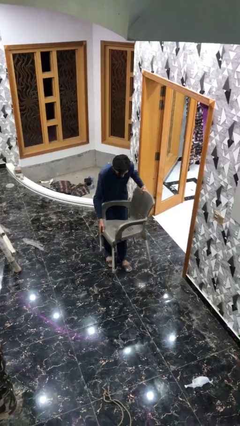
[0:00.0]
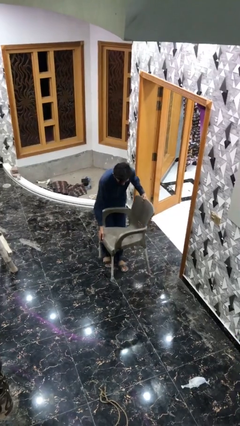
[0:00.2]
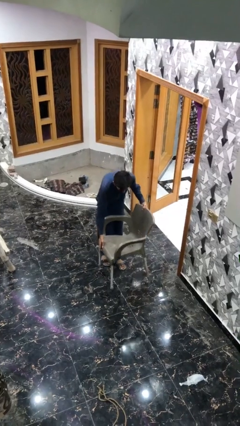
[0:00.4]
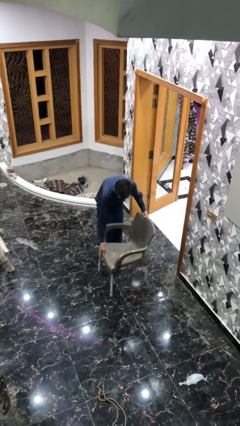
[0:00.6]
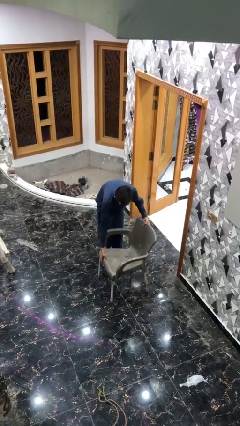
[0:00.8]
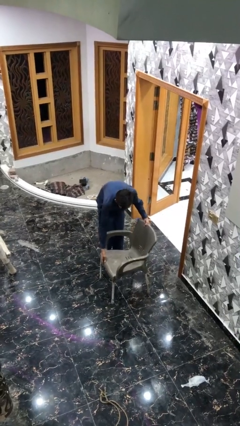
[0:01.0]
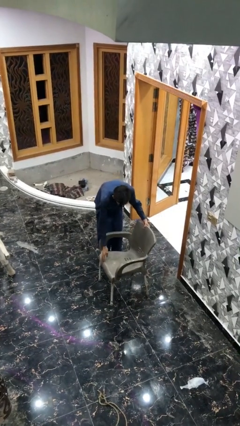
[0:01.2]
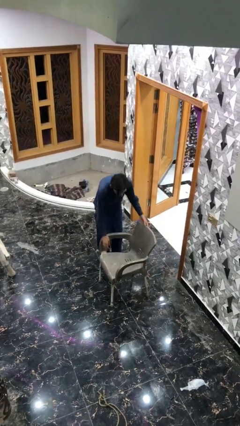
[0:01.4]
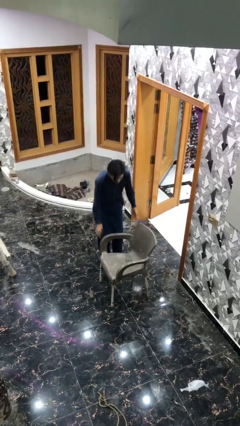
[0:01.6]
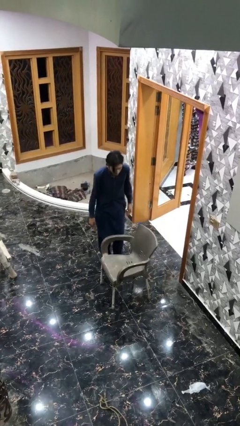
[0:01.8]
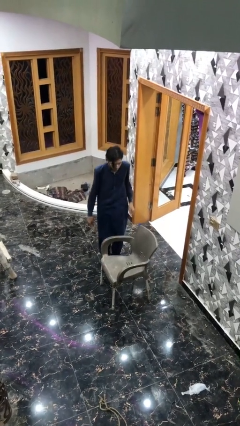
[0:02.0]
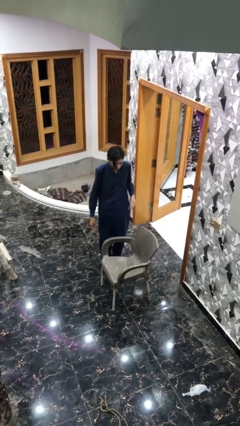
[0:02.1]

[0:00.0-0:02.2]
person puts down object on floor

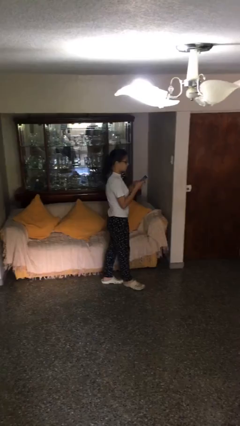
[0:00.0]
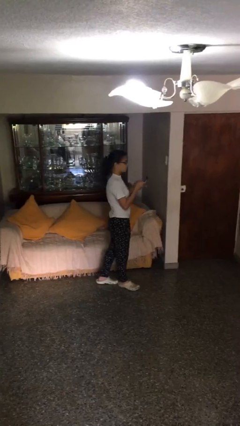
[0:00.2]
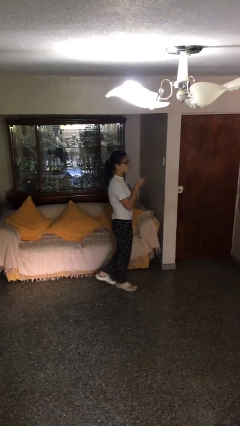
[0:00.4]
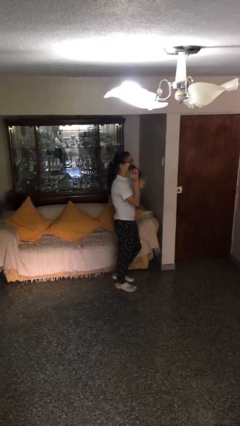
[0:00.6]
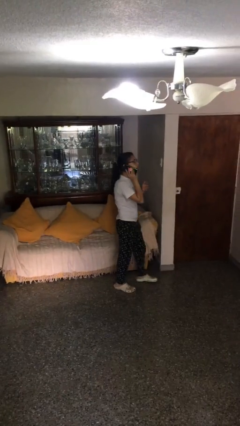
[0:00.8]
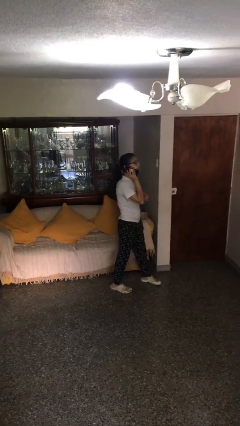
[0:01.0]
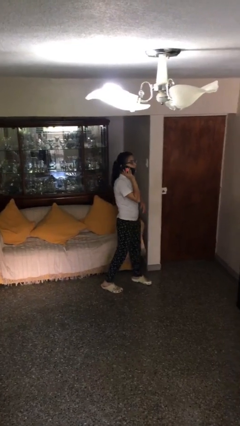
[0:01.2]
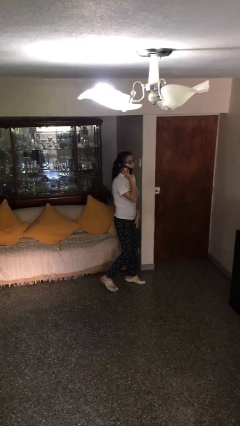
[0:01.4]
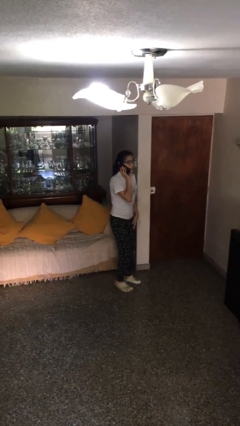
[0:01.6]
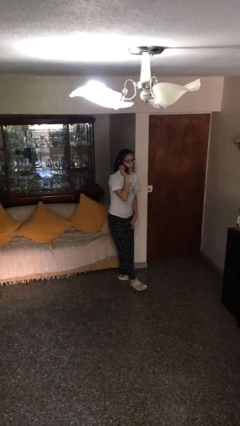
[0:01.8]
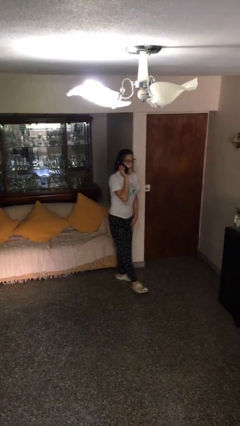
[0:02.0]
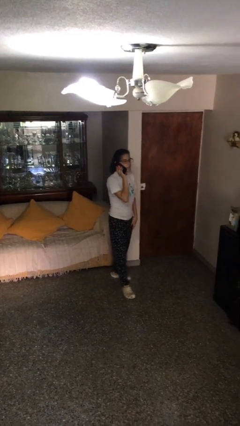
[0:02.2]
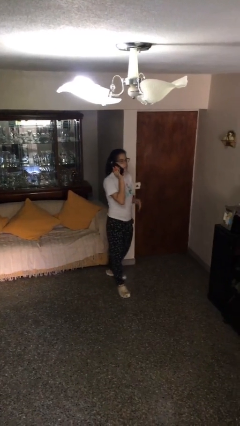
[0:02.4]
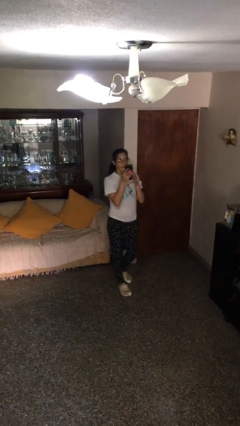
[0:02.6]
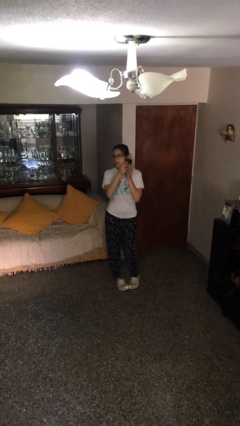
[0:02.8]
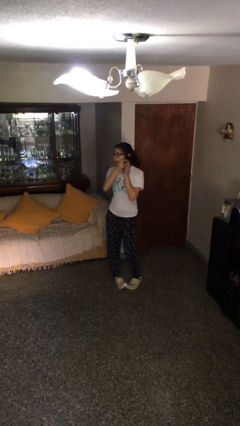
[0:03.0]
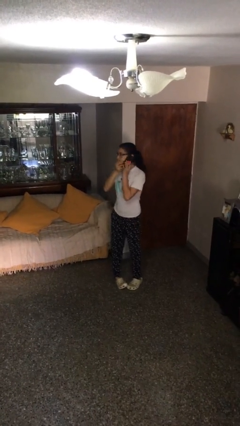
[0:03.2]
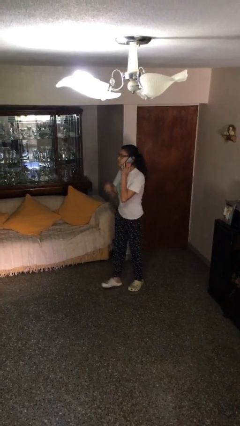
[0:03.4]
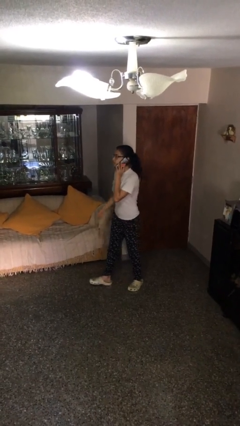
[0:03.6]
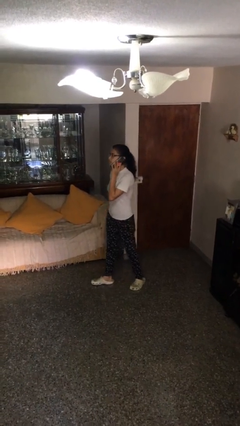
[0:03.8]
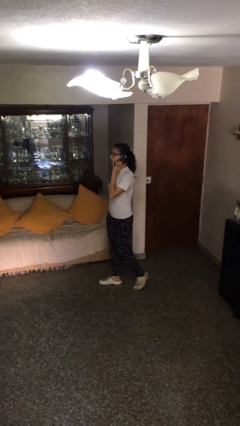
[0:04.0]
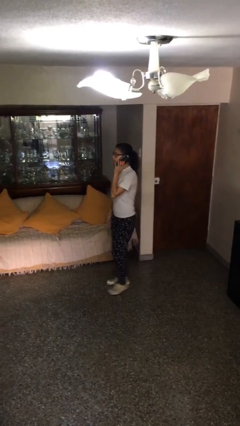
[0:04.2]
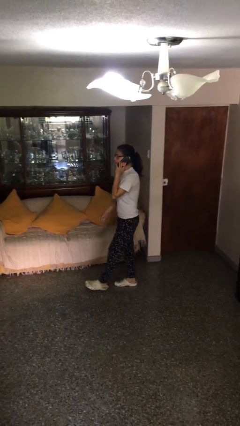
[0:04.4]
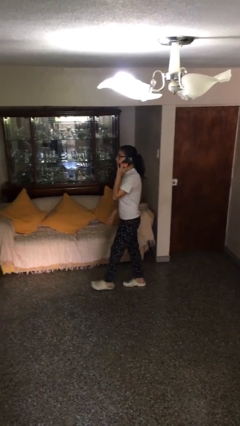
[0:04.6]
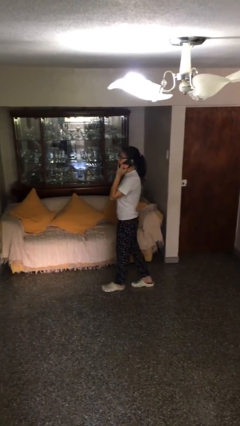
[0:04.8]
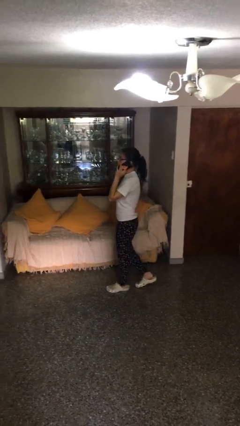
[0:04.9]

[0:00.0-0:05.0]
person talks on phone

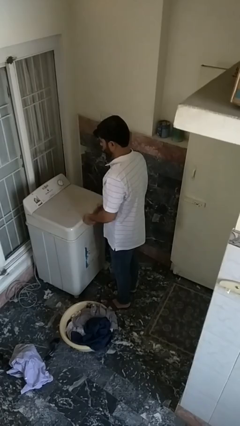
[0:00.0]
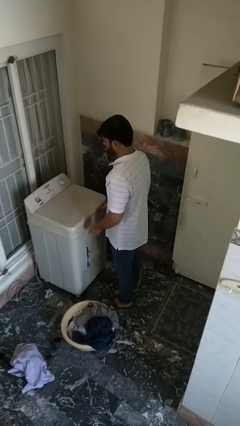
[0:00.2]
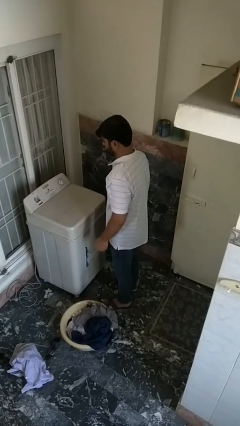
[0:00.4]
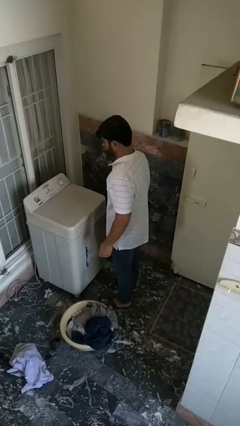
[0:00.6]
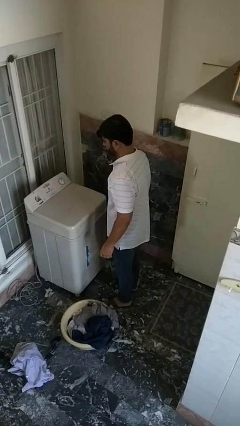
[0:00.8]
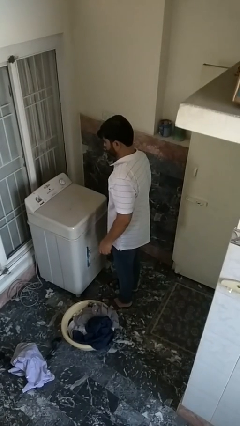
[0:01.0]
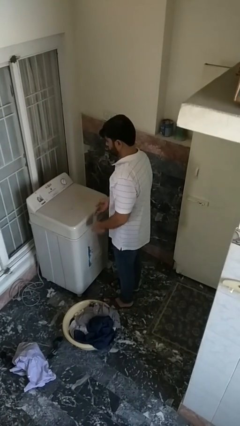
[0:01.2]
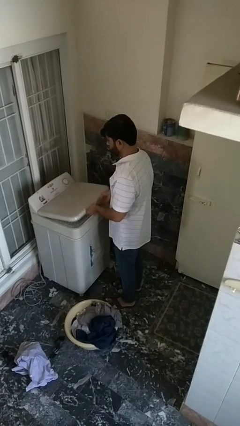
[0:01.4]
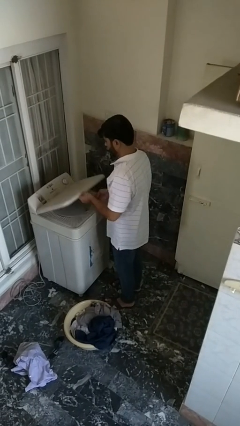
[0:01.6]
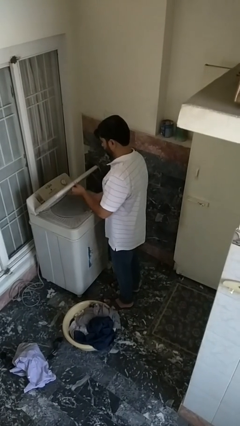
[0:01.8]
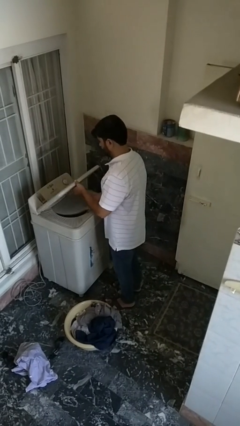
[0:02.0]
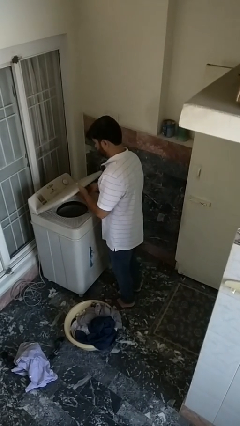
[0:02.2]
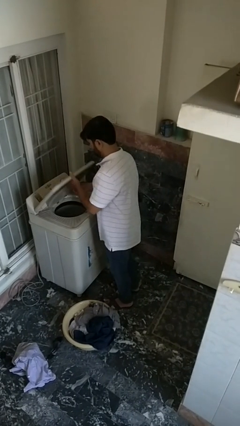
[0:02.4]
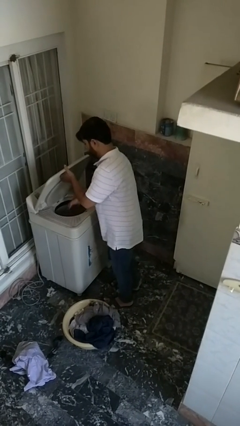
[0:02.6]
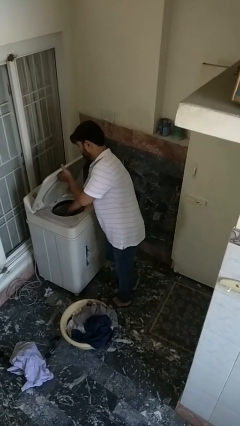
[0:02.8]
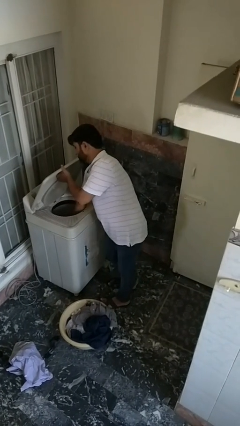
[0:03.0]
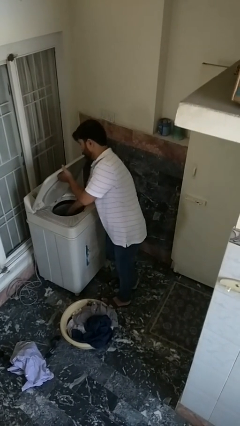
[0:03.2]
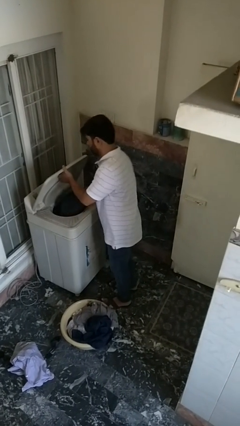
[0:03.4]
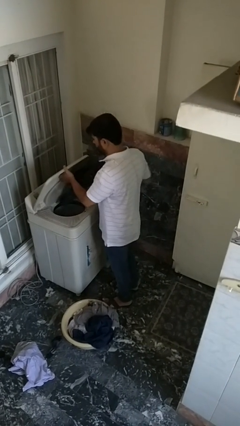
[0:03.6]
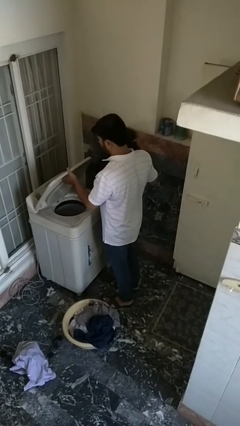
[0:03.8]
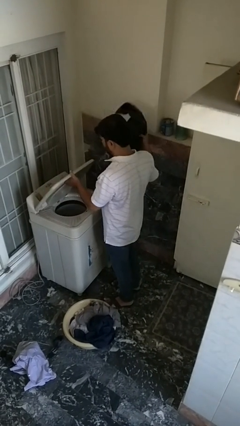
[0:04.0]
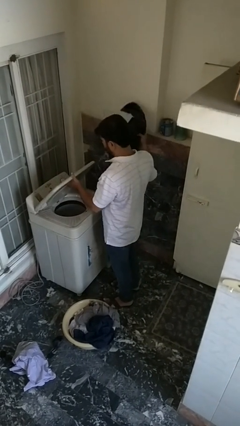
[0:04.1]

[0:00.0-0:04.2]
person unloads dryer

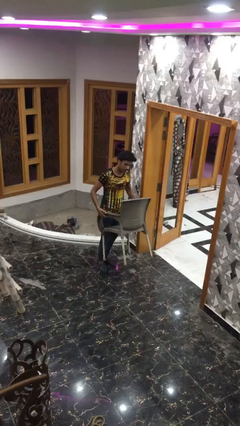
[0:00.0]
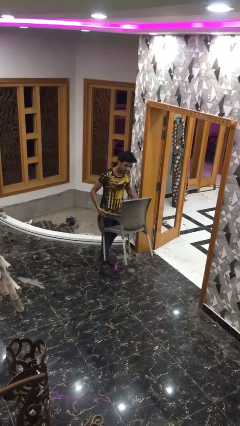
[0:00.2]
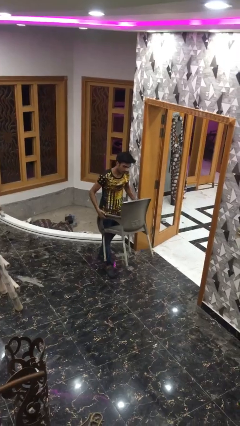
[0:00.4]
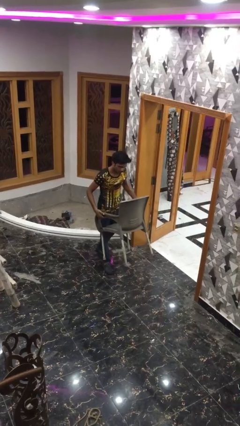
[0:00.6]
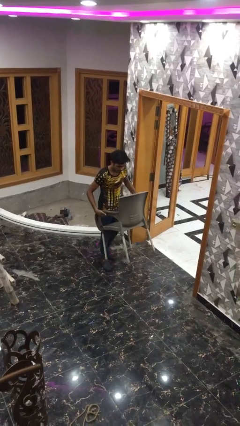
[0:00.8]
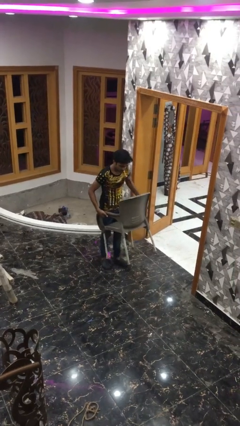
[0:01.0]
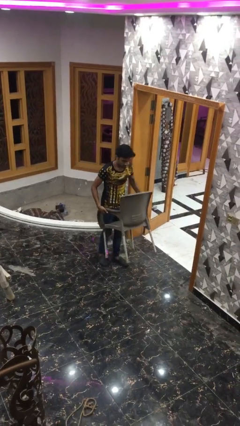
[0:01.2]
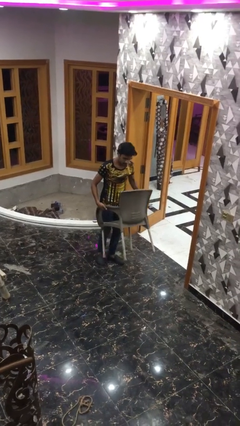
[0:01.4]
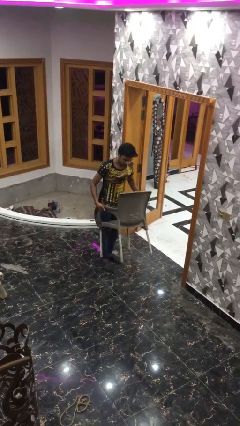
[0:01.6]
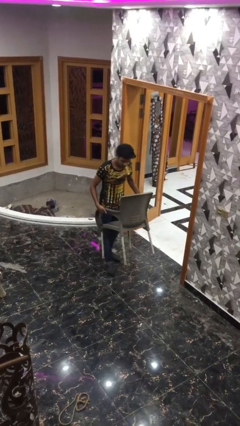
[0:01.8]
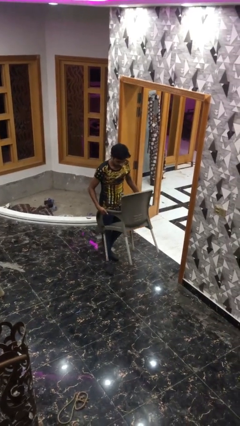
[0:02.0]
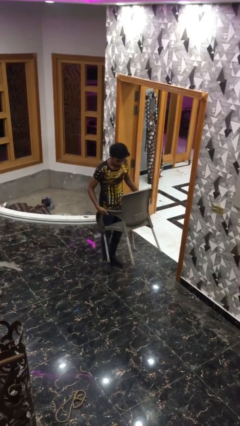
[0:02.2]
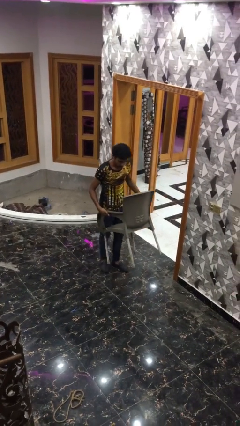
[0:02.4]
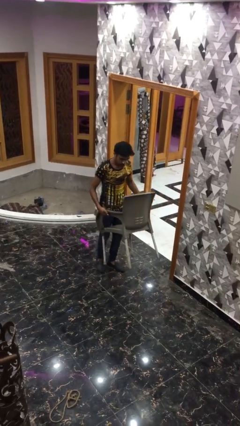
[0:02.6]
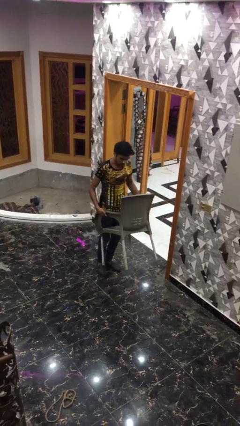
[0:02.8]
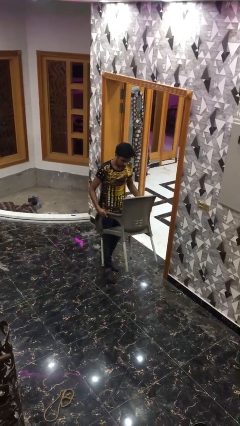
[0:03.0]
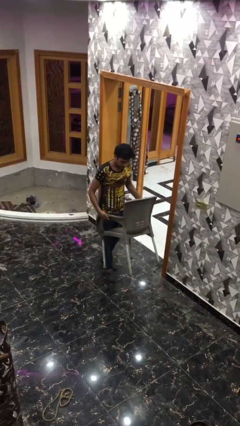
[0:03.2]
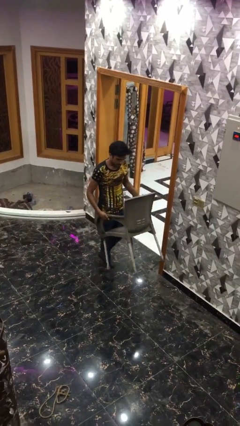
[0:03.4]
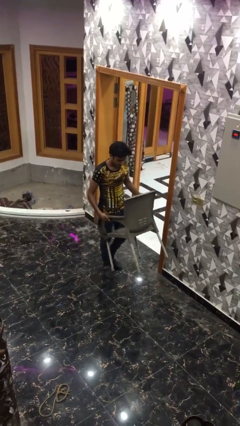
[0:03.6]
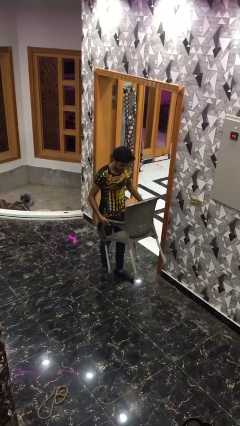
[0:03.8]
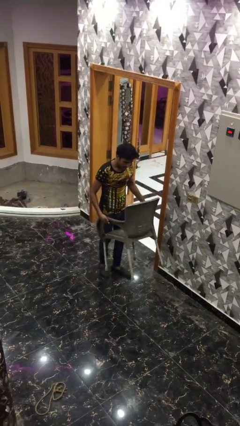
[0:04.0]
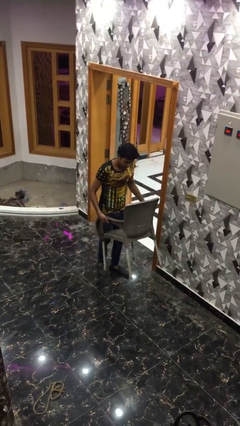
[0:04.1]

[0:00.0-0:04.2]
person carries heavy object

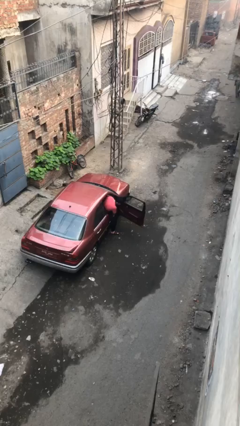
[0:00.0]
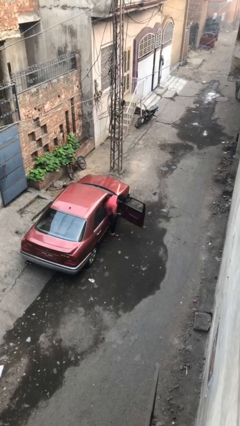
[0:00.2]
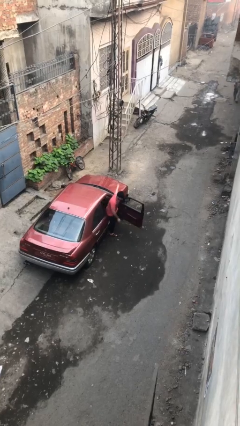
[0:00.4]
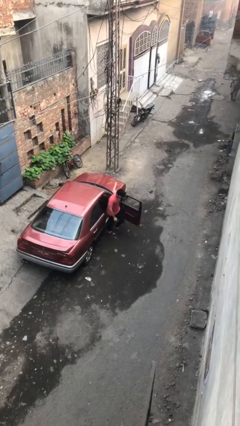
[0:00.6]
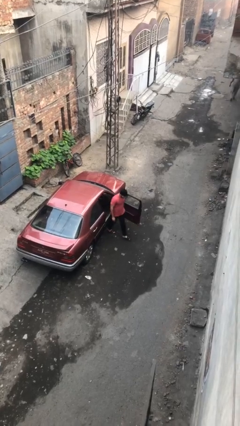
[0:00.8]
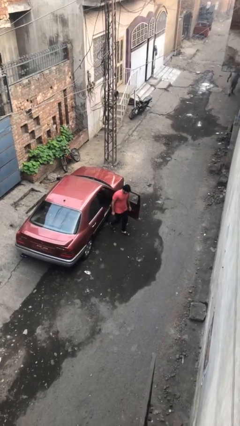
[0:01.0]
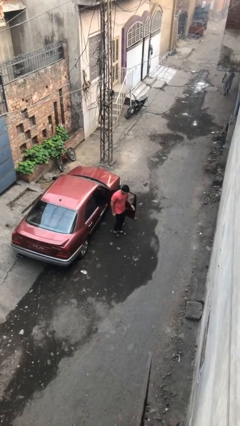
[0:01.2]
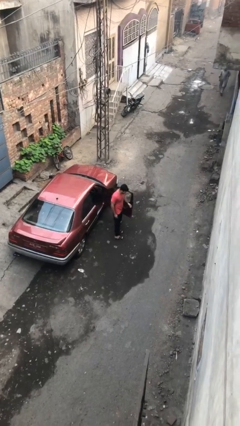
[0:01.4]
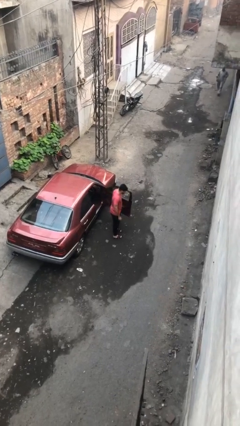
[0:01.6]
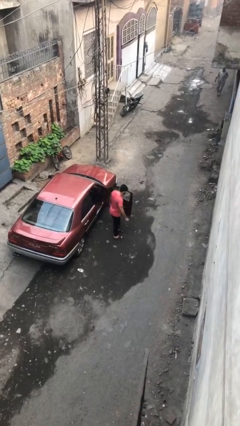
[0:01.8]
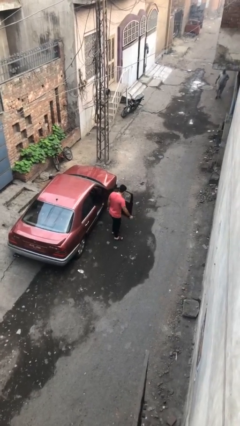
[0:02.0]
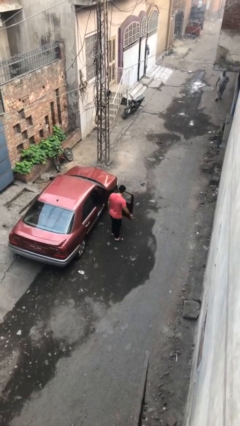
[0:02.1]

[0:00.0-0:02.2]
person exits car
